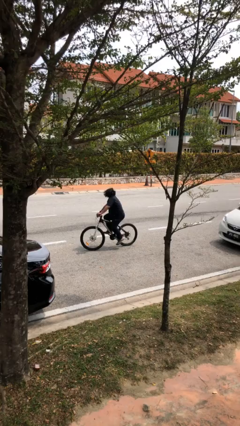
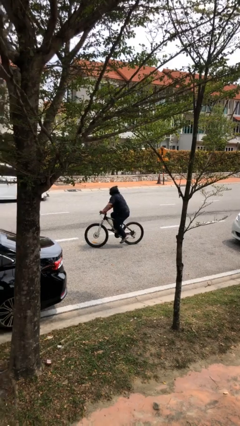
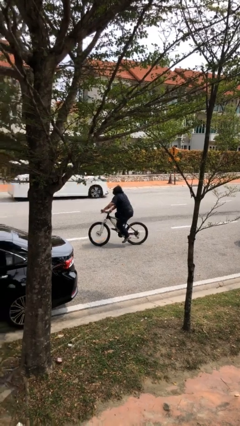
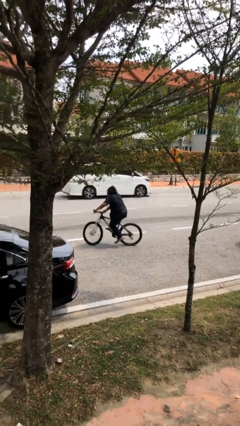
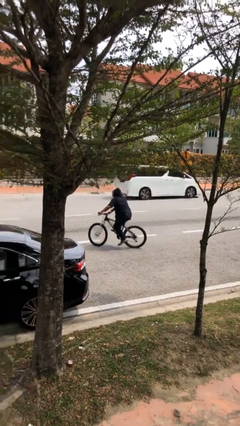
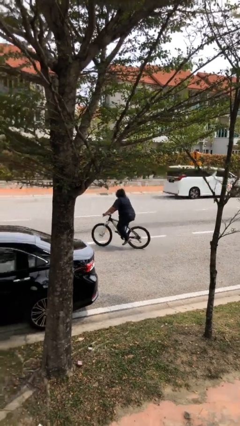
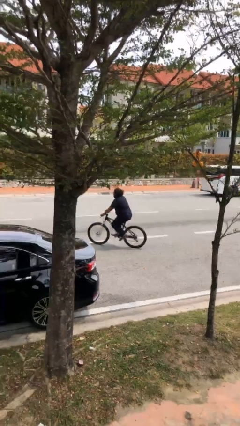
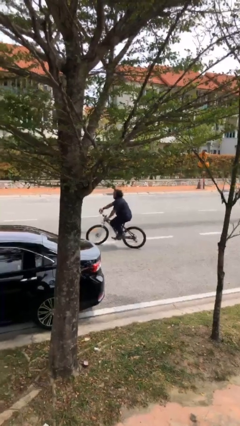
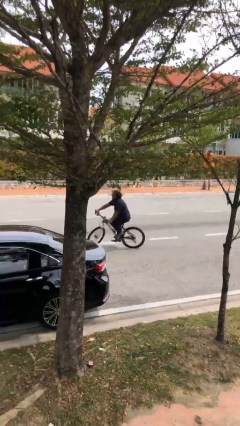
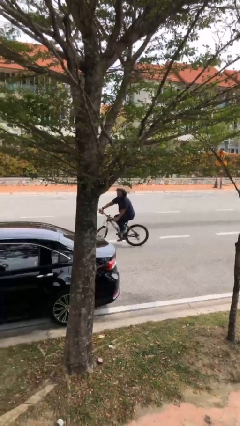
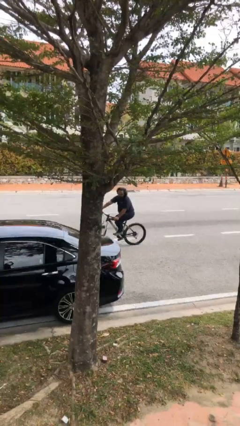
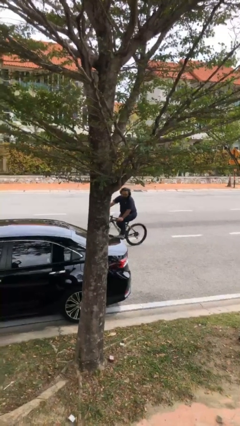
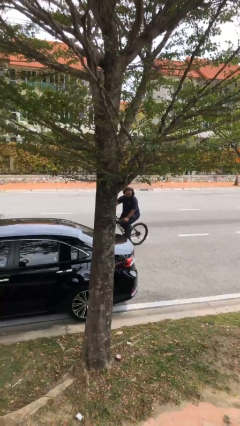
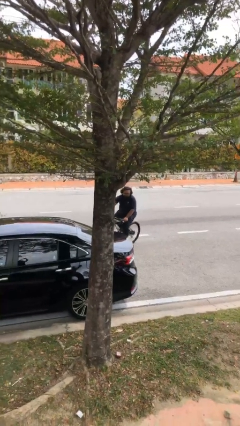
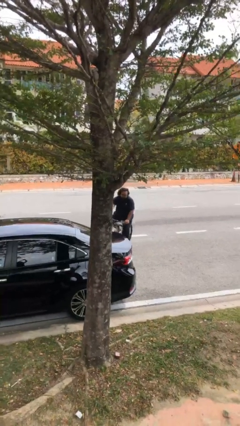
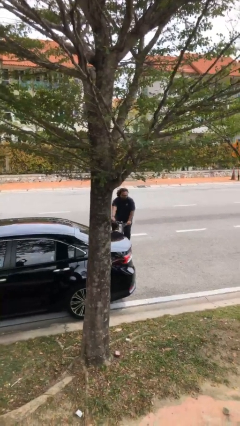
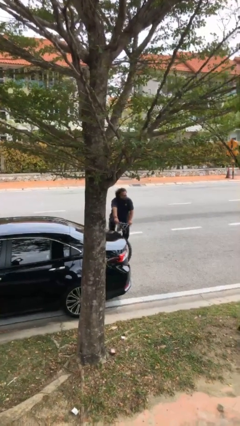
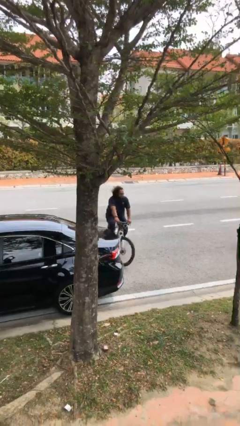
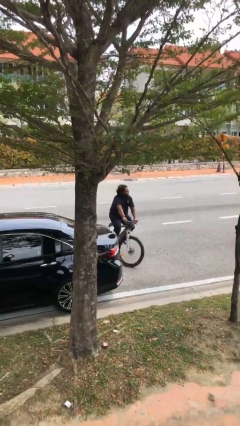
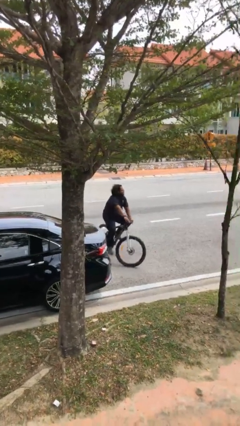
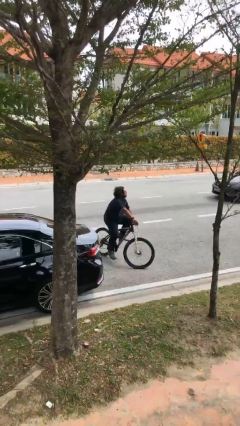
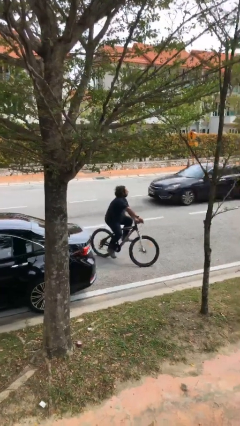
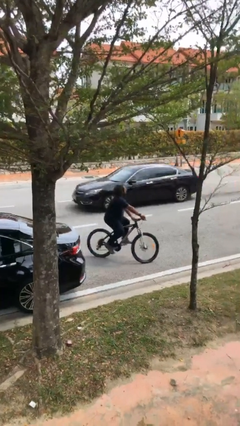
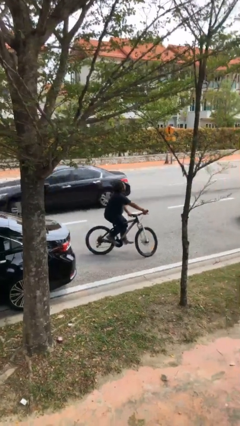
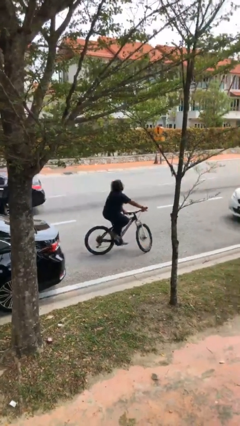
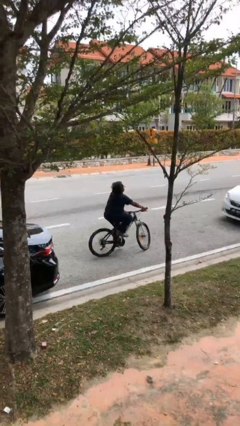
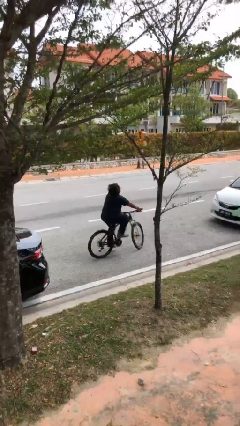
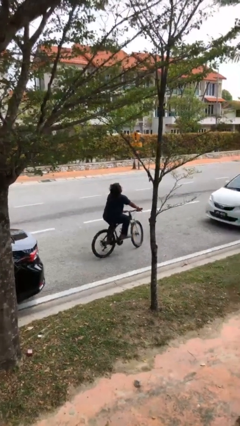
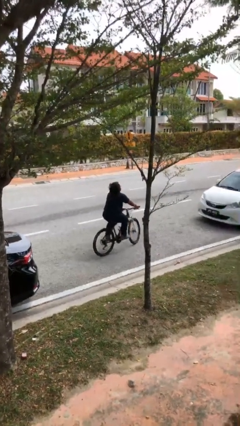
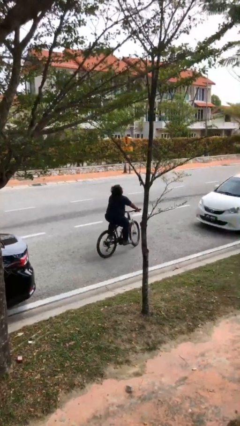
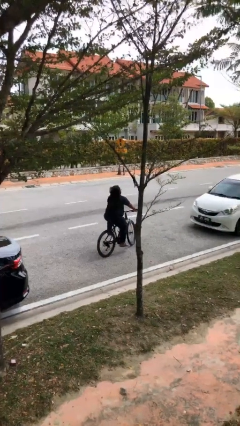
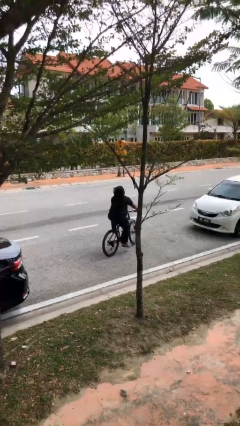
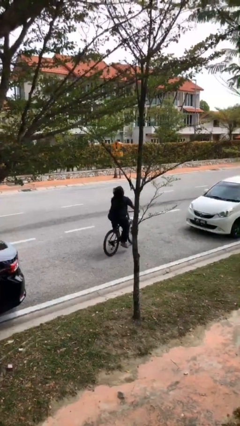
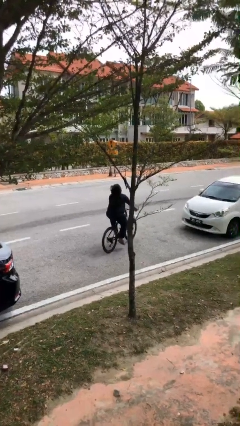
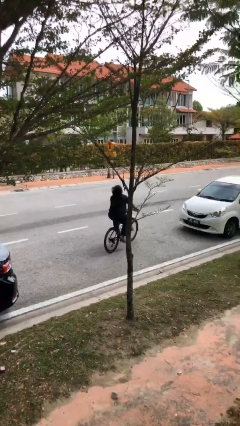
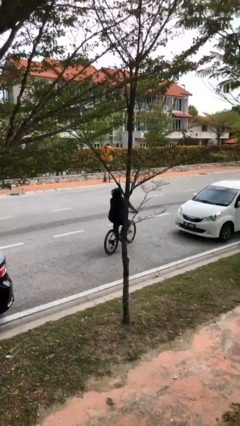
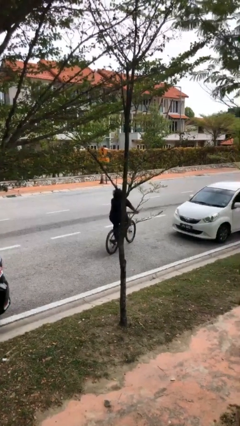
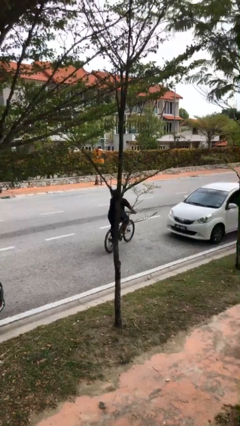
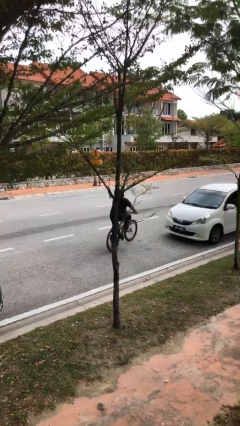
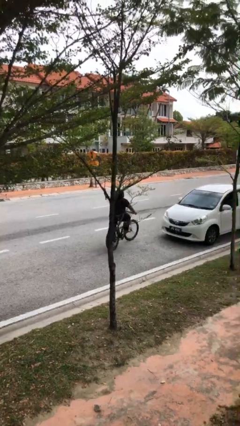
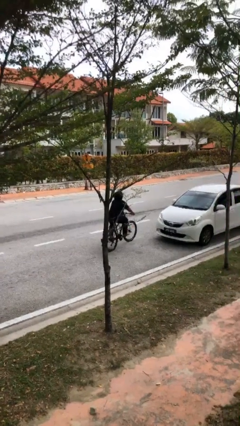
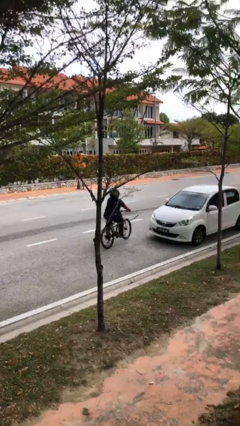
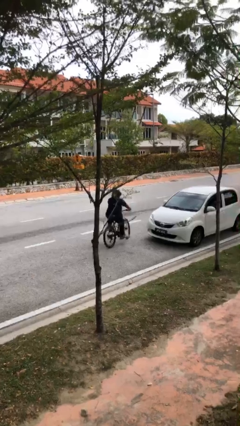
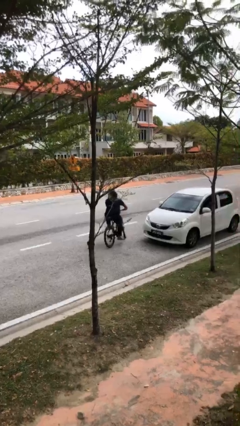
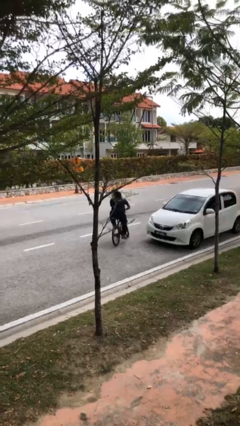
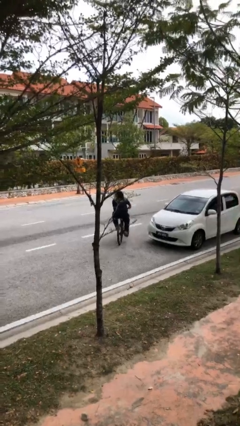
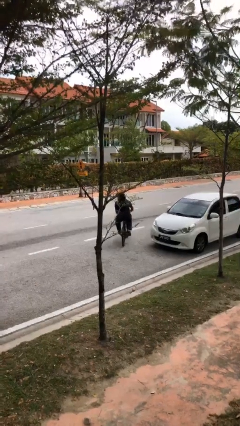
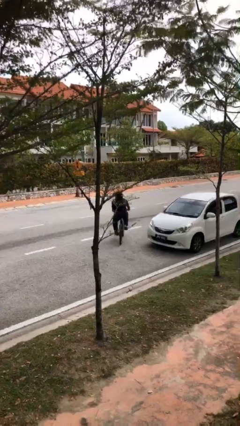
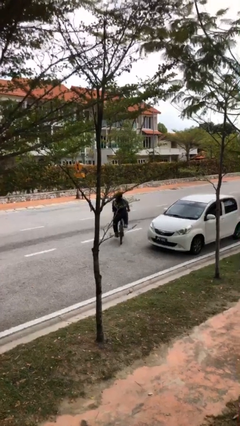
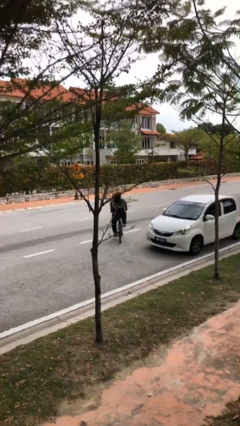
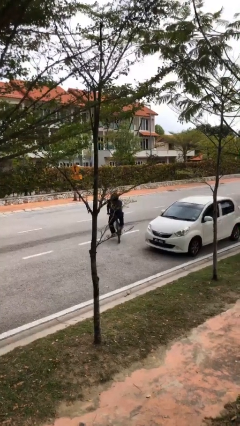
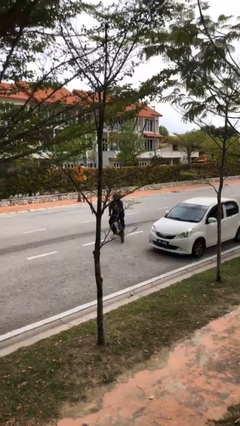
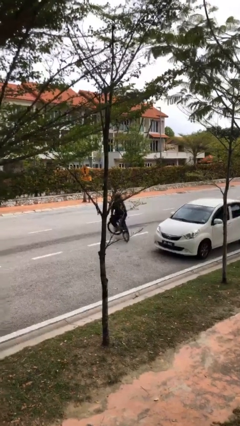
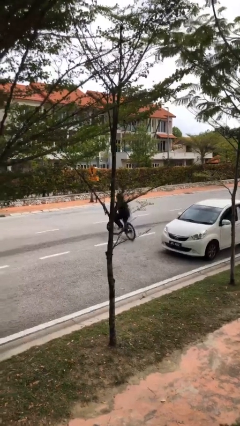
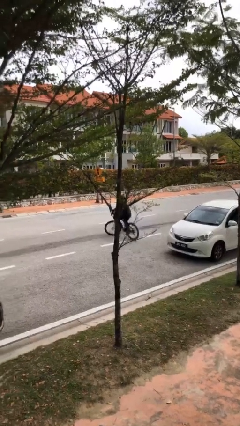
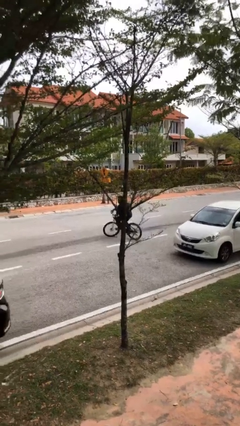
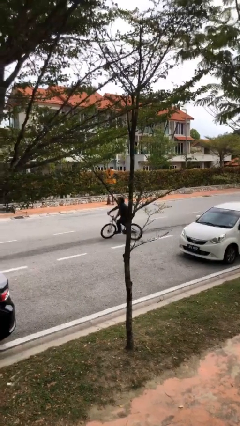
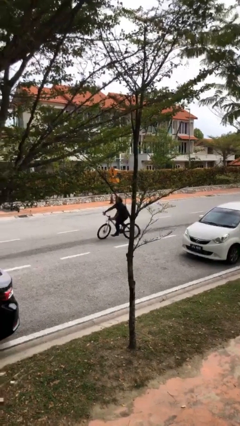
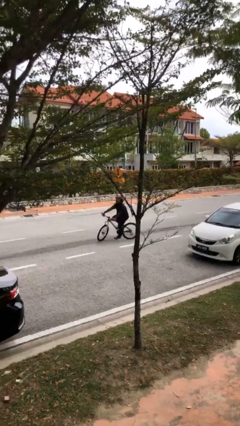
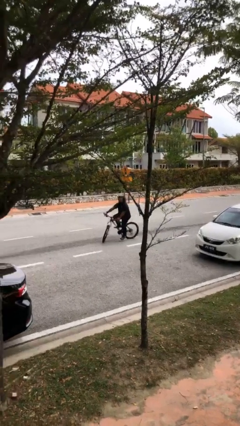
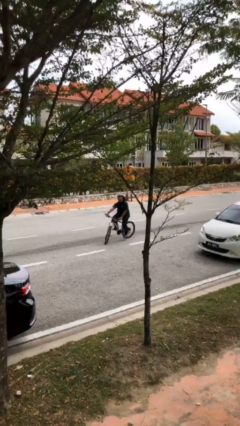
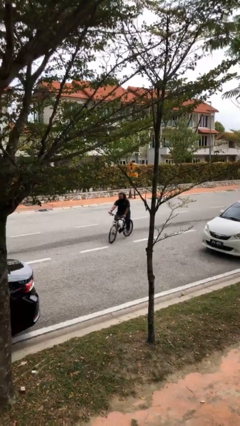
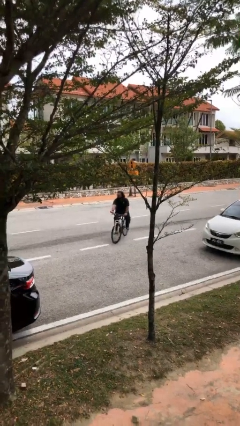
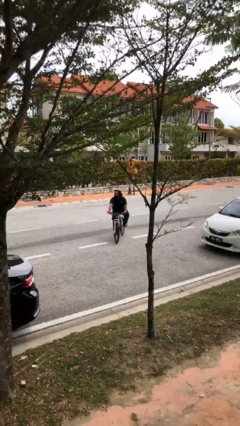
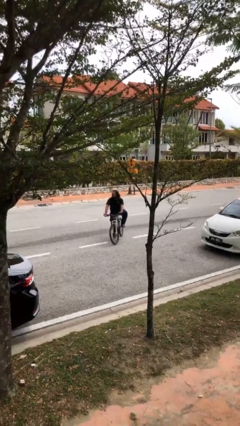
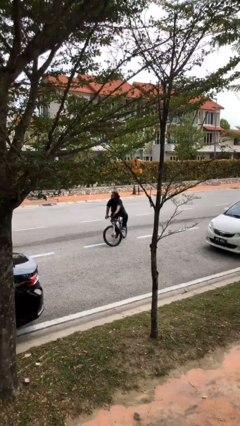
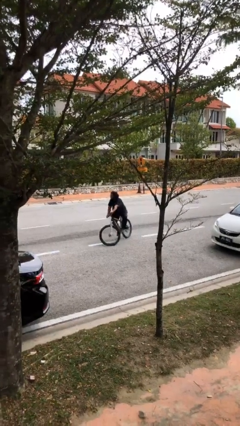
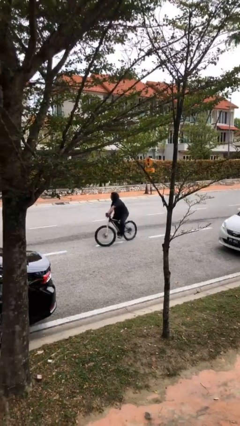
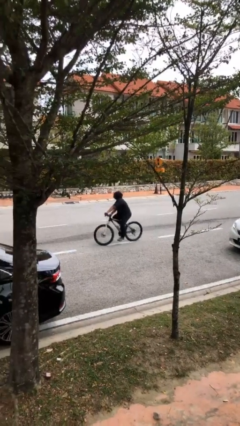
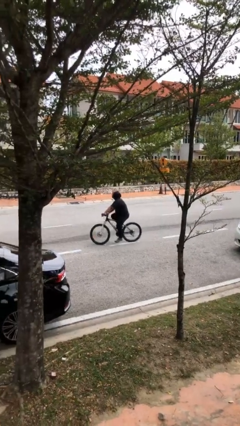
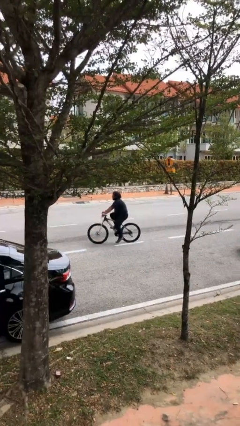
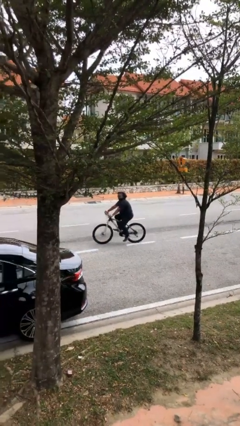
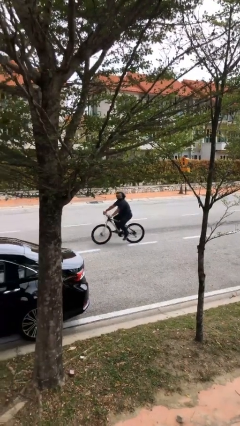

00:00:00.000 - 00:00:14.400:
person rides bicycle

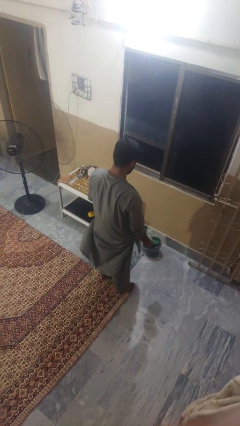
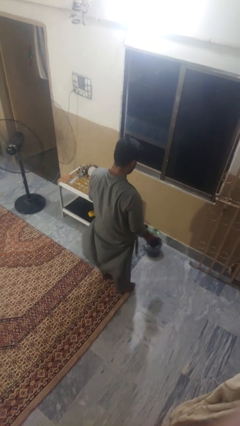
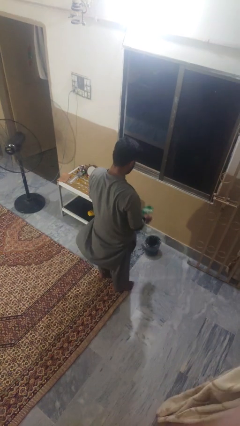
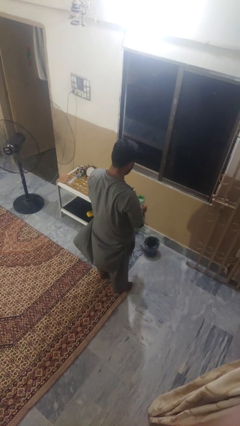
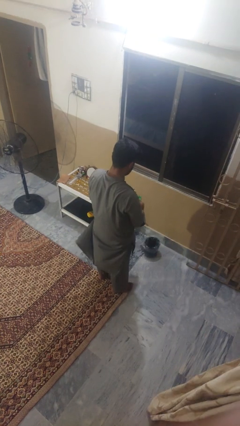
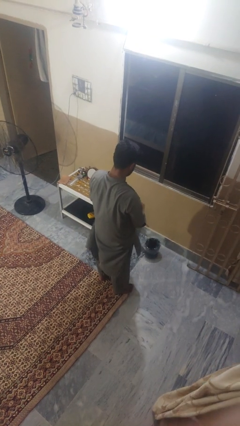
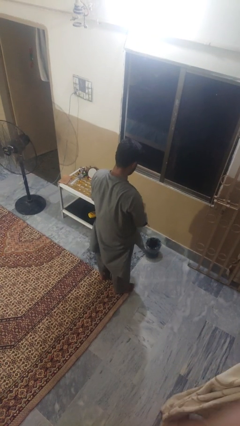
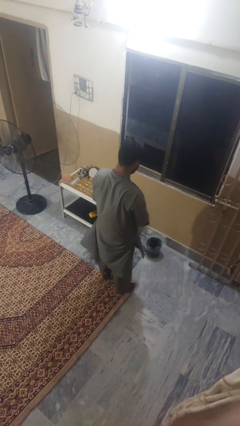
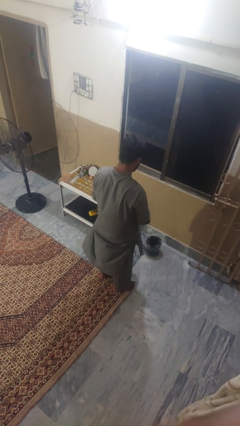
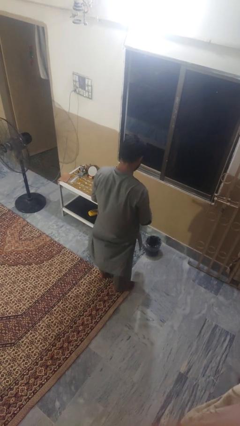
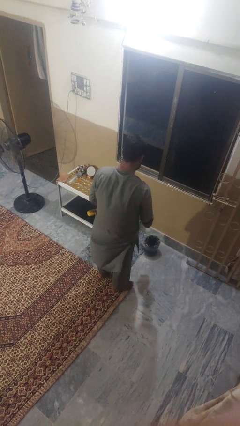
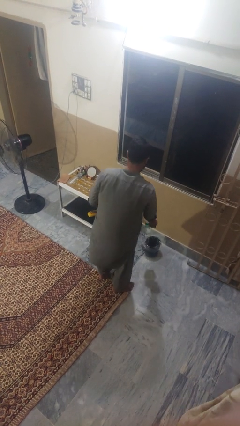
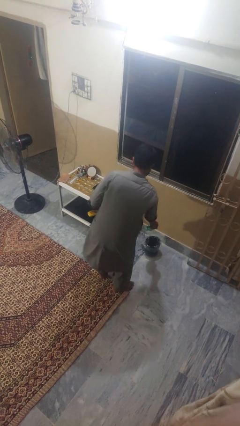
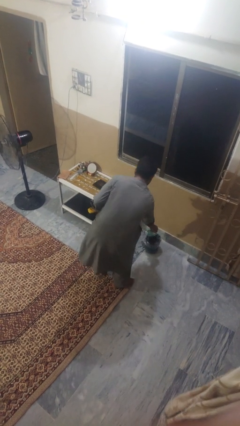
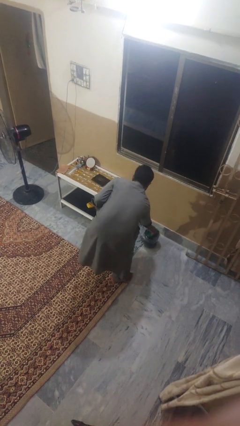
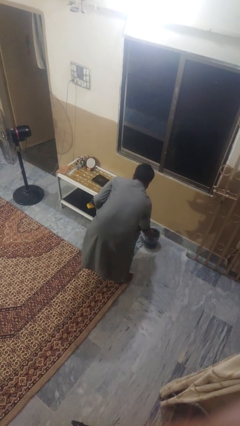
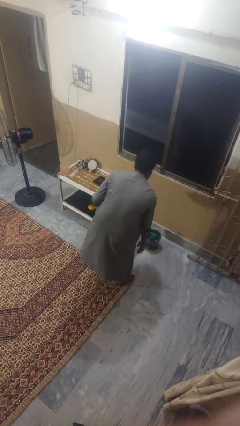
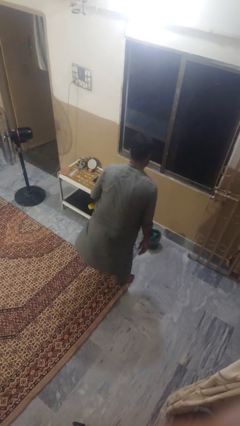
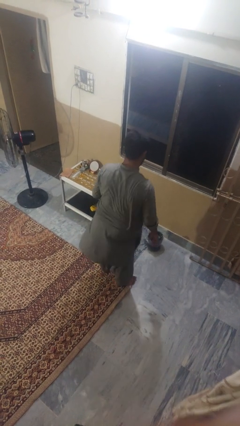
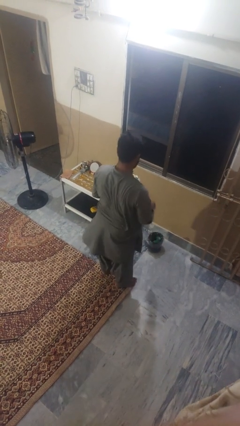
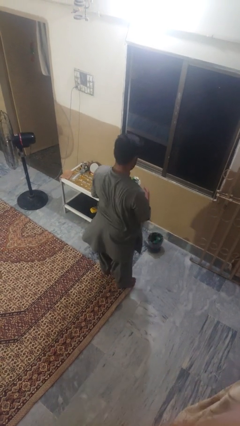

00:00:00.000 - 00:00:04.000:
person discards trash
